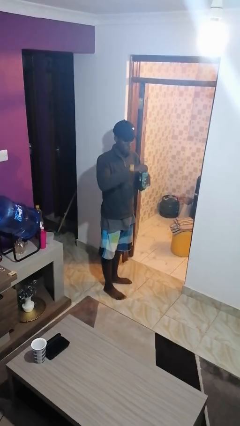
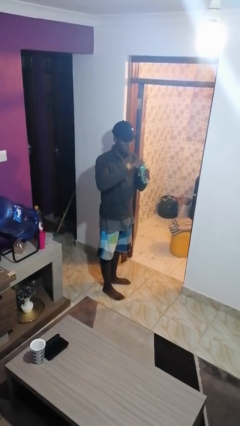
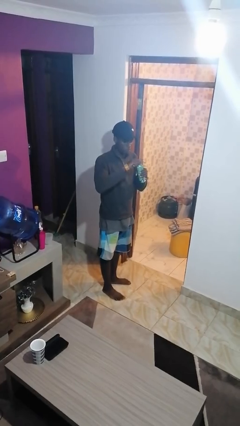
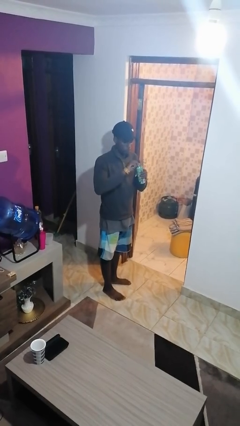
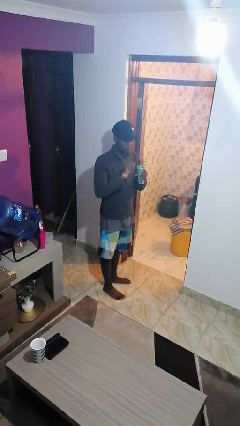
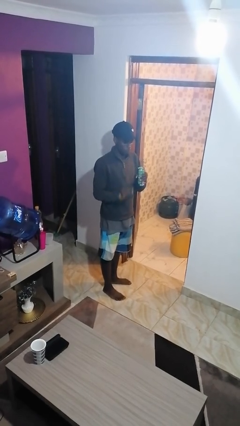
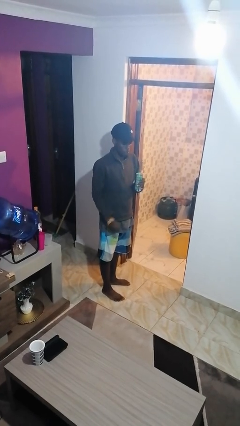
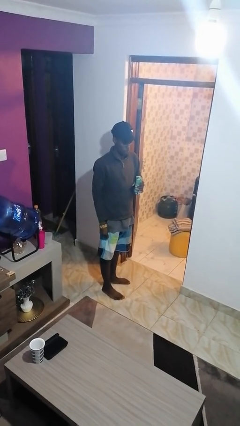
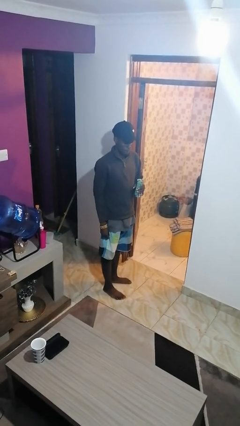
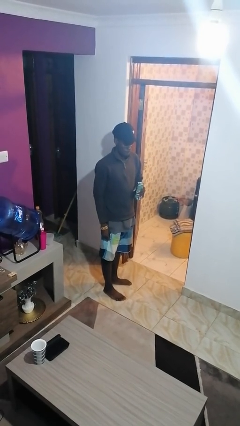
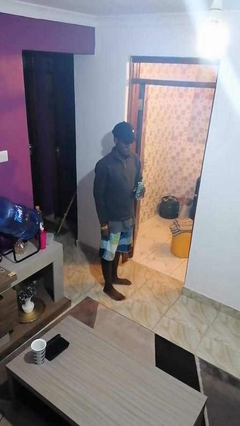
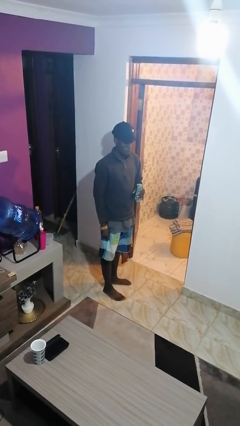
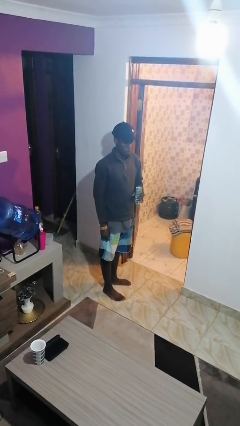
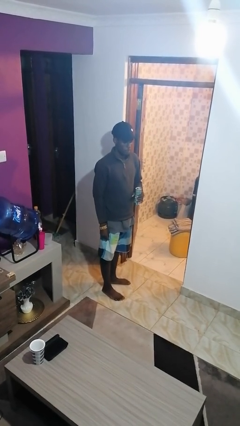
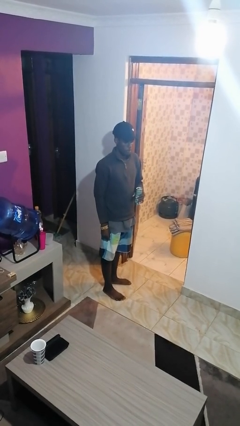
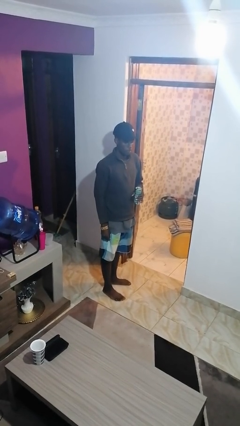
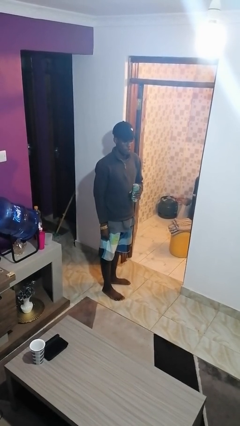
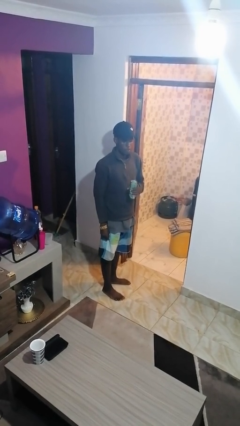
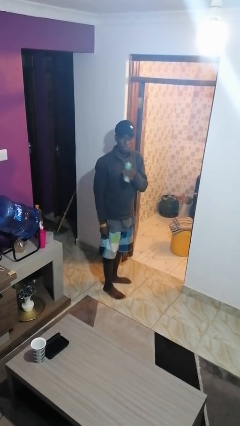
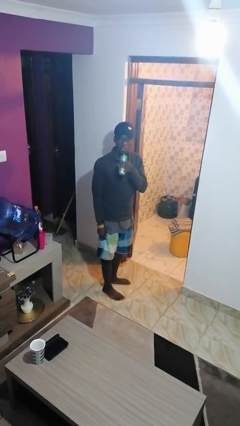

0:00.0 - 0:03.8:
person opens beverage can

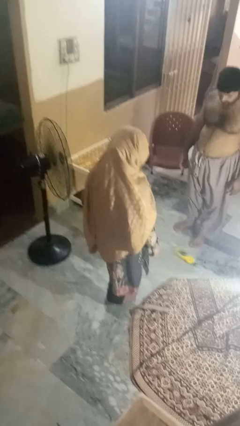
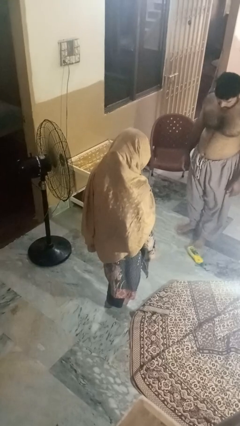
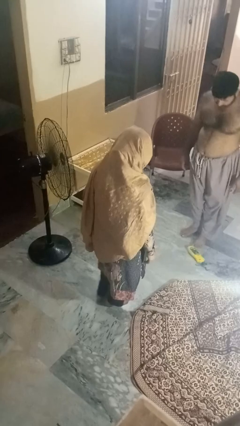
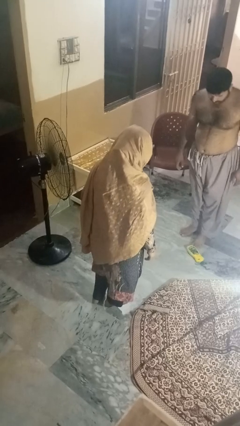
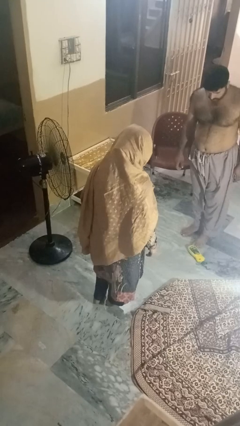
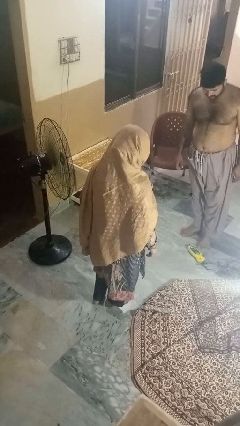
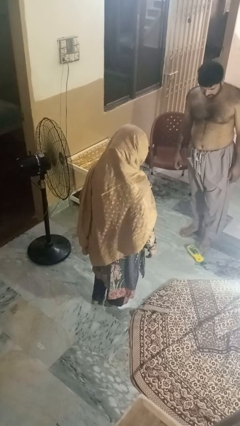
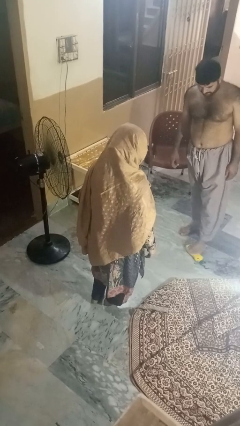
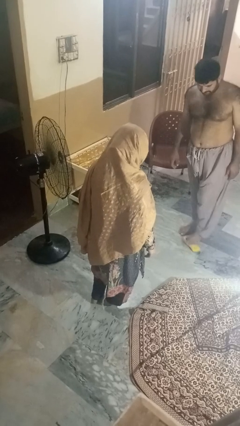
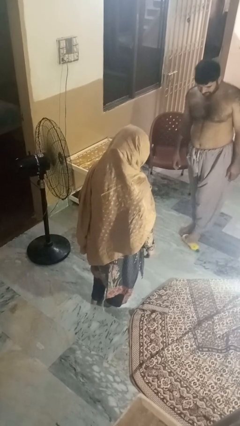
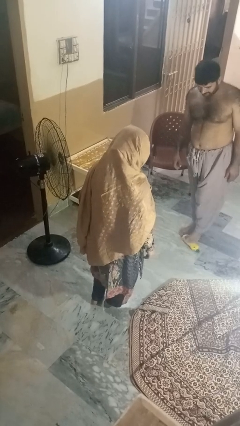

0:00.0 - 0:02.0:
person kicks object to person

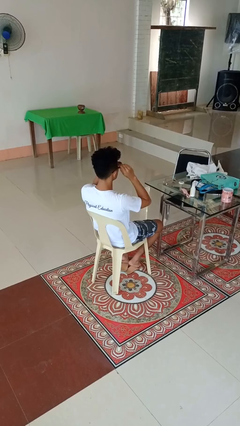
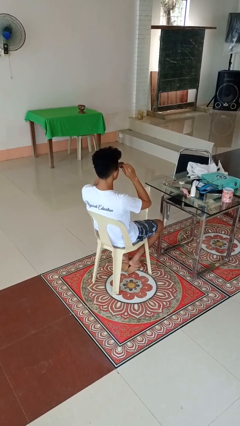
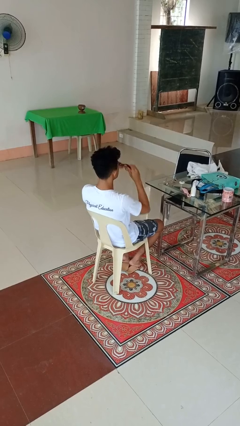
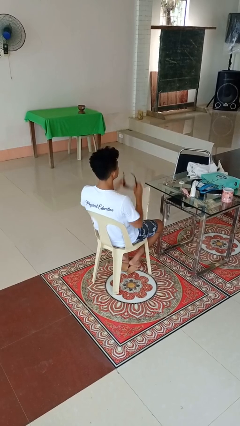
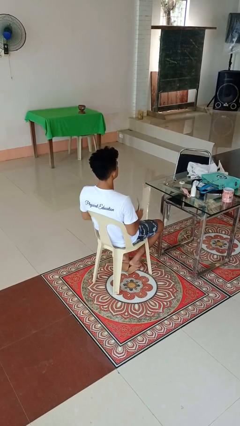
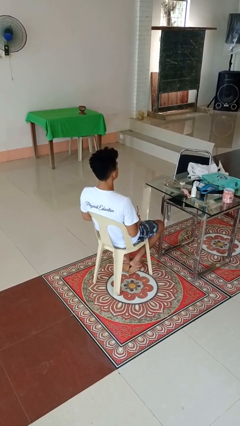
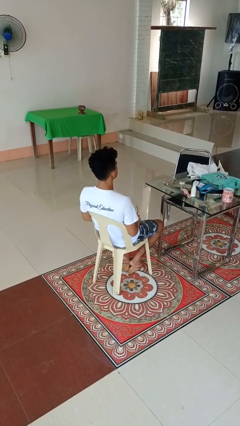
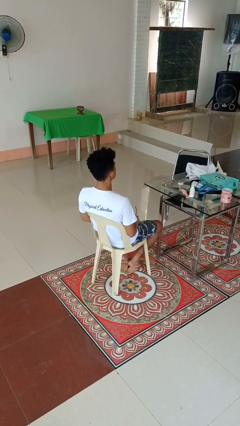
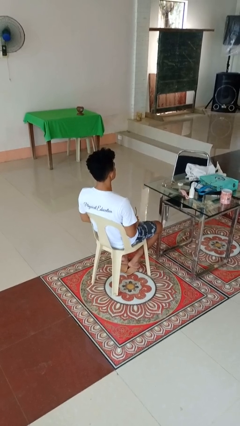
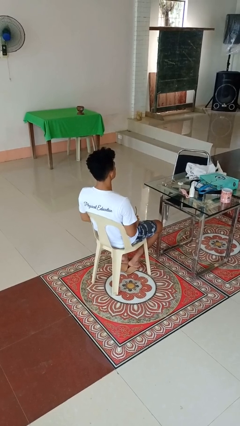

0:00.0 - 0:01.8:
person takes off sunglasses

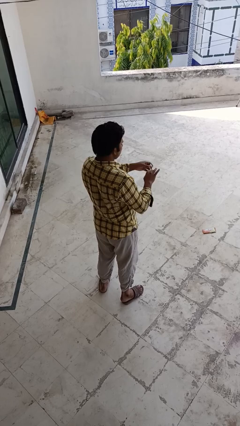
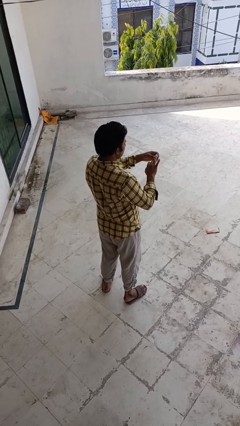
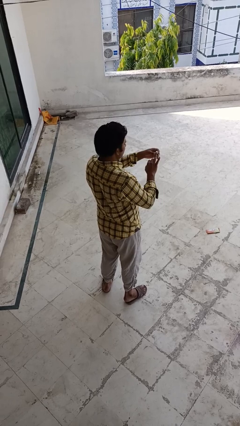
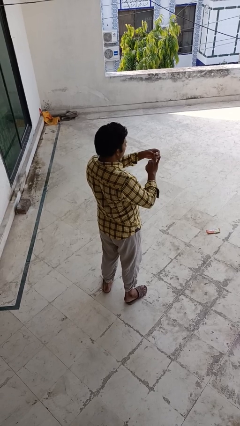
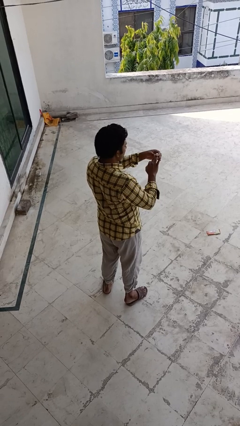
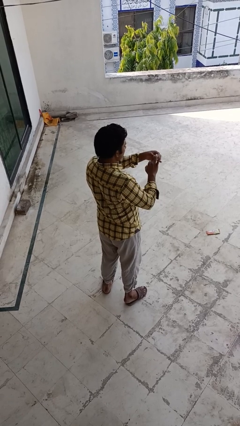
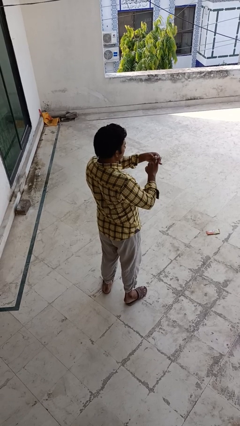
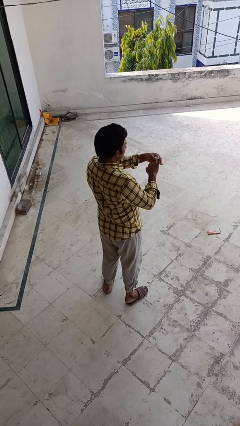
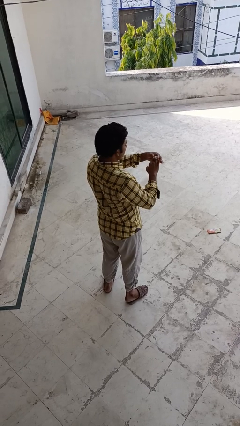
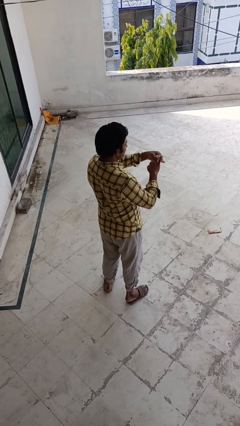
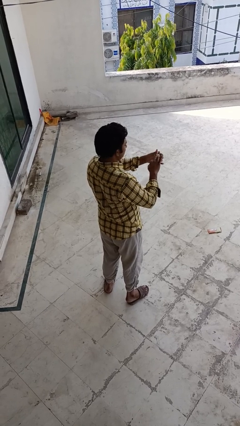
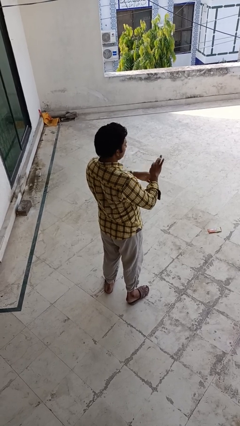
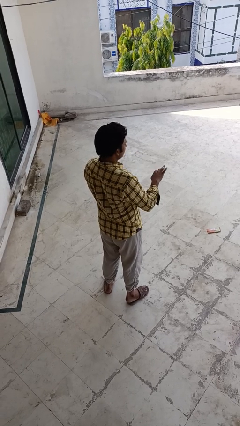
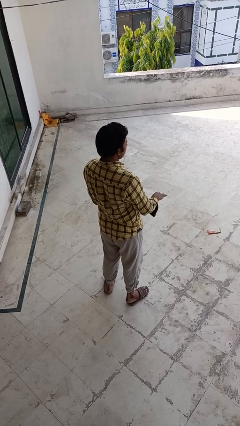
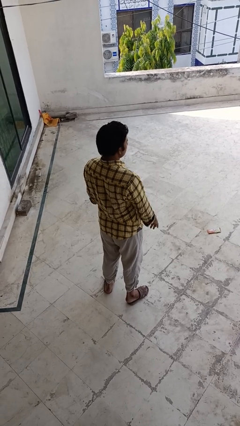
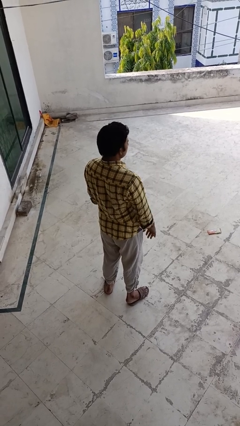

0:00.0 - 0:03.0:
person puts on ring

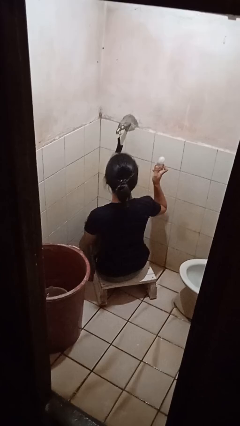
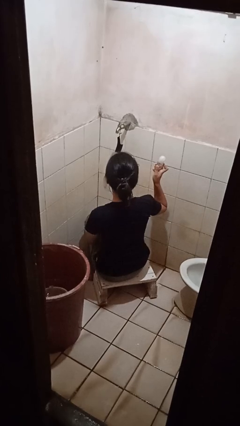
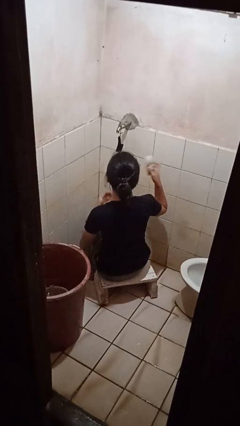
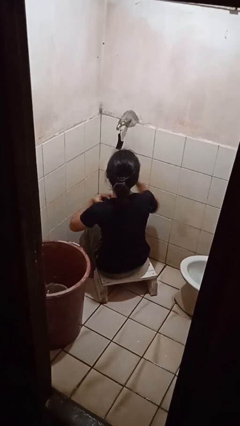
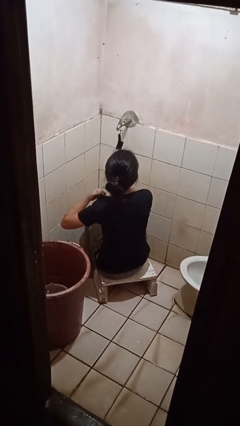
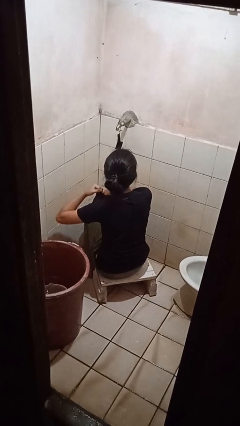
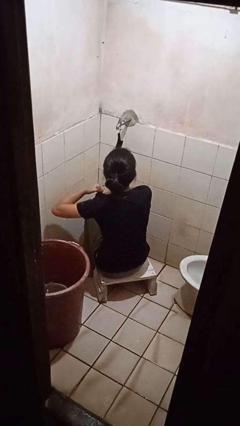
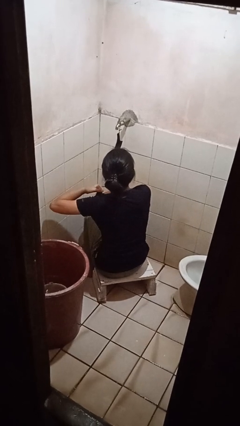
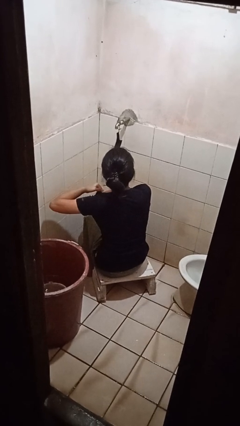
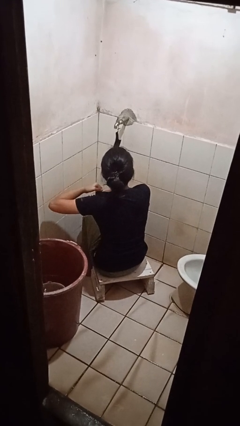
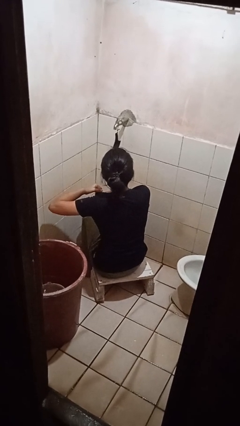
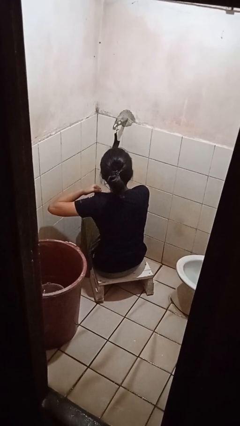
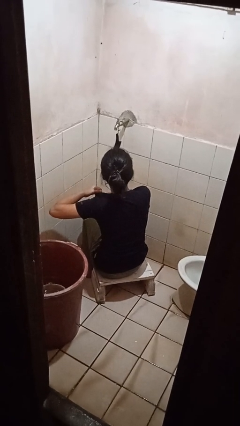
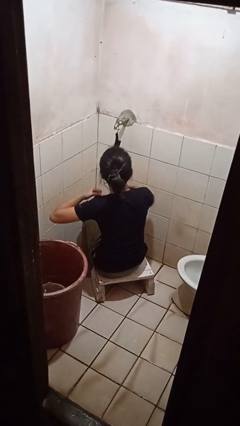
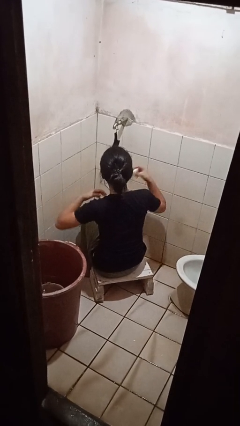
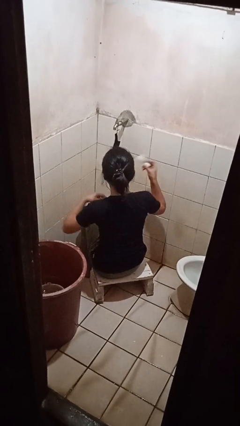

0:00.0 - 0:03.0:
person applies deodorant

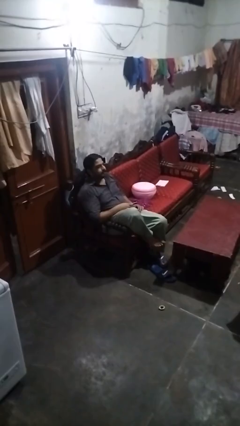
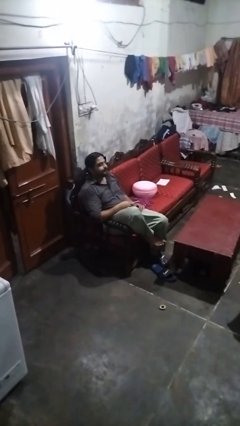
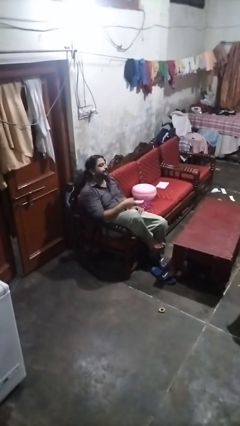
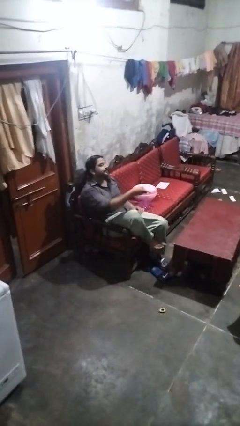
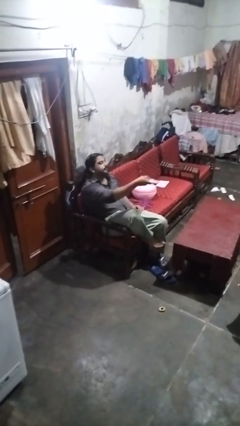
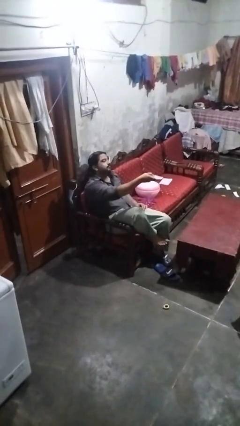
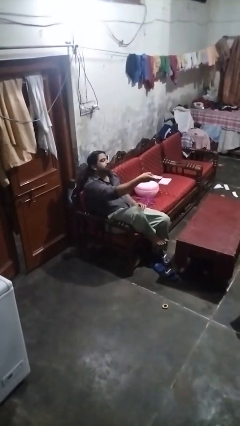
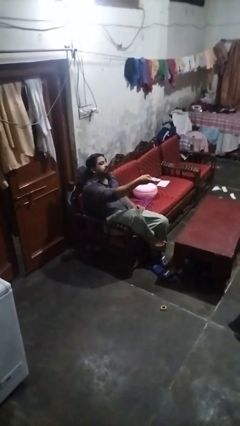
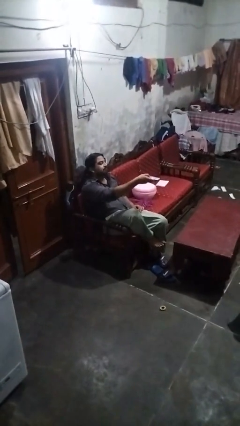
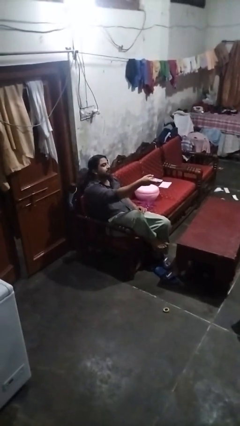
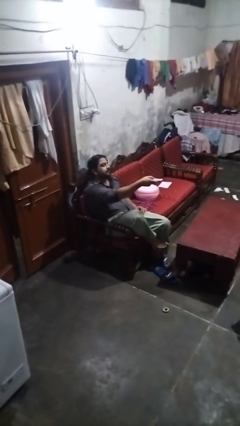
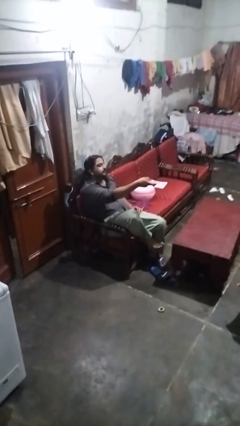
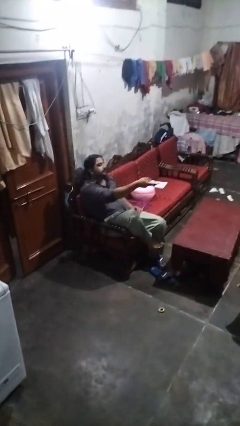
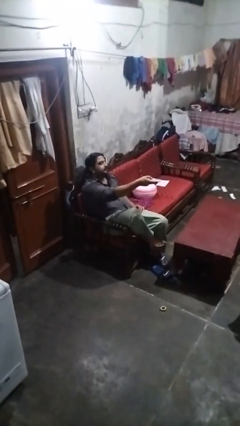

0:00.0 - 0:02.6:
person uses television remote

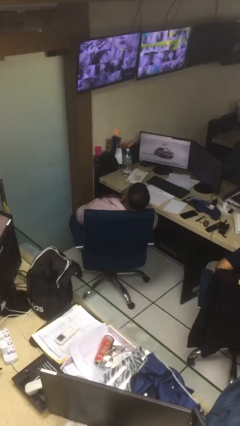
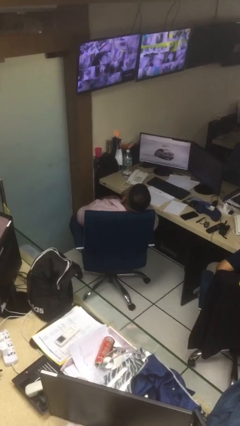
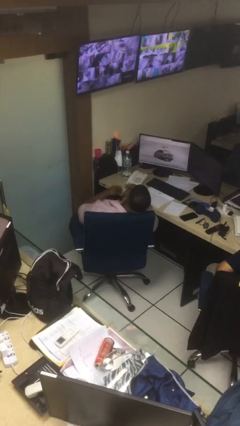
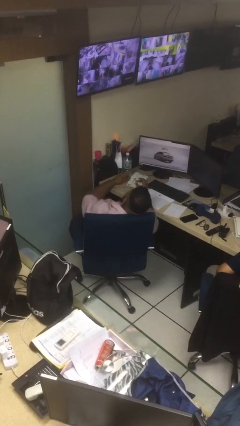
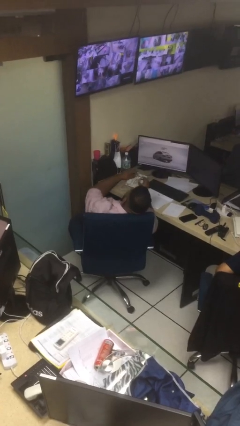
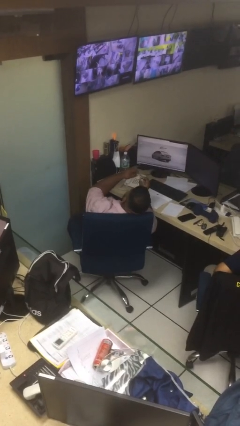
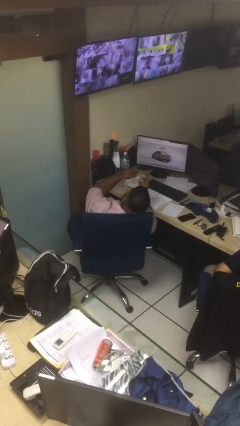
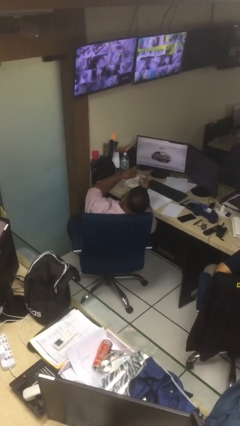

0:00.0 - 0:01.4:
person clips fingernails
